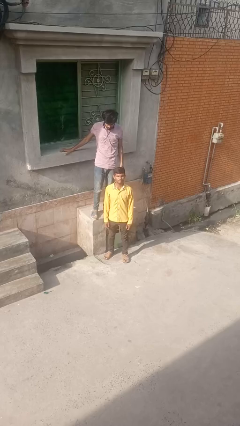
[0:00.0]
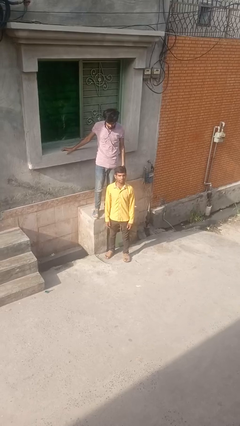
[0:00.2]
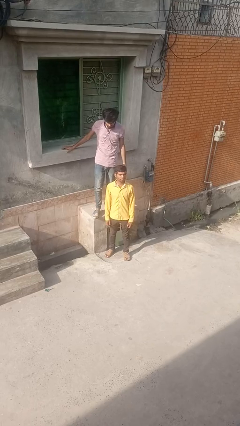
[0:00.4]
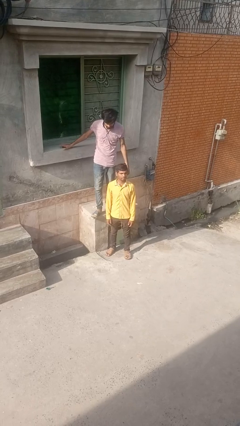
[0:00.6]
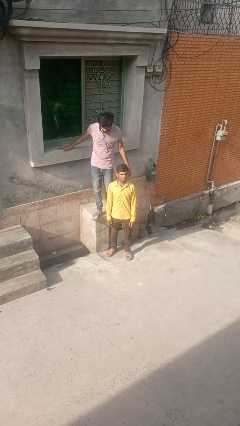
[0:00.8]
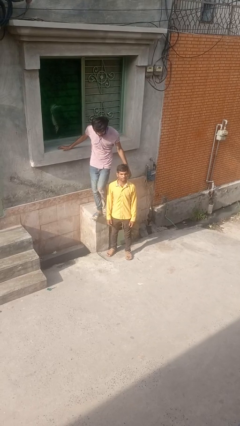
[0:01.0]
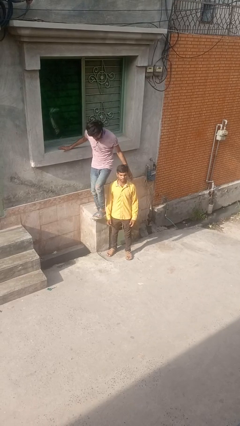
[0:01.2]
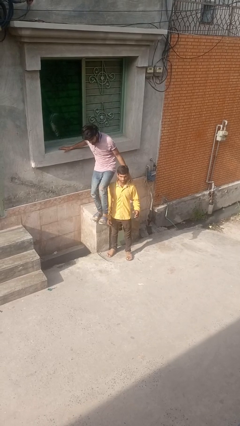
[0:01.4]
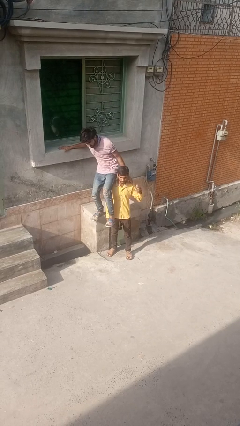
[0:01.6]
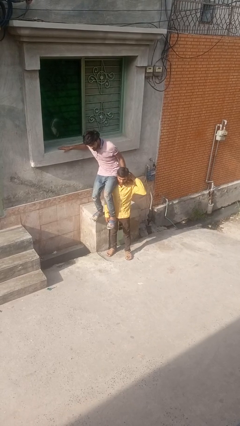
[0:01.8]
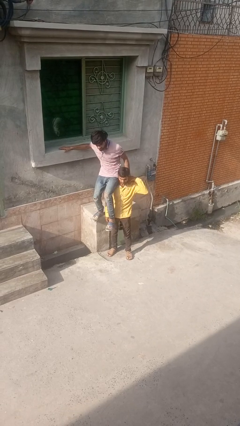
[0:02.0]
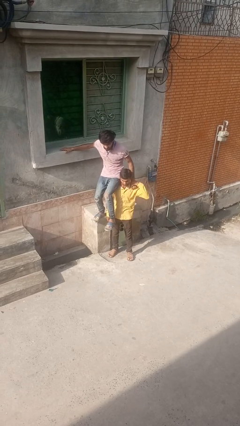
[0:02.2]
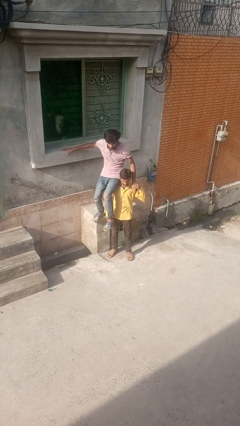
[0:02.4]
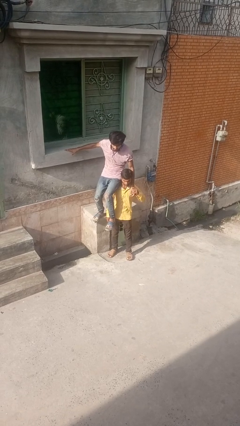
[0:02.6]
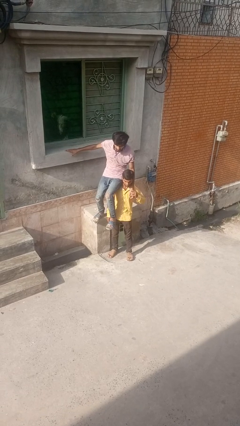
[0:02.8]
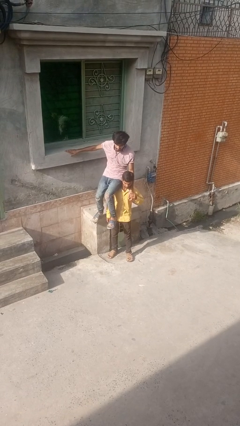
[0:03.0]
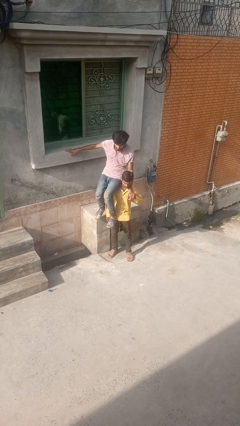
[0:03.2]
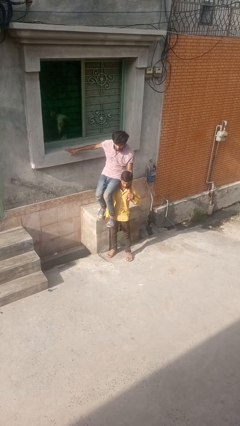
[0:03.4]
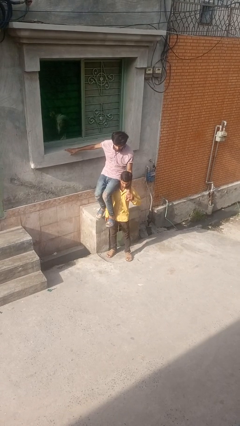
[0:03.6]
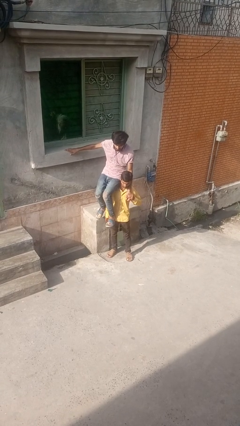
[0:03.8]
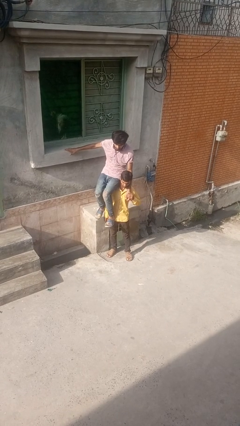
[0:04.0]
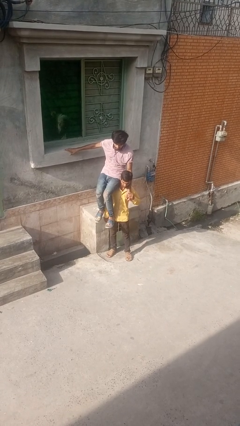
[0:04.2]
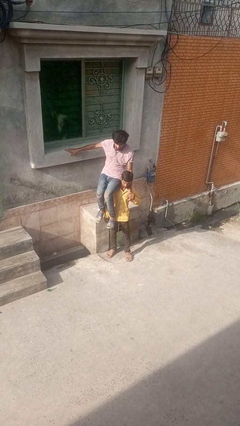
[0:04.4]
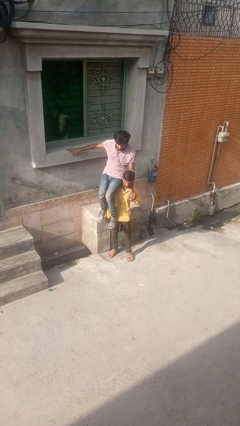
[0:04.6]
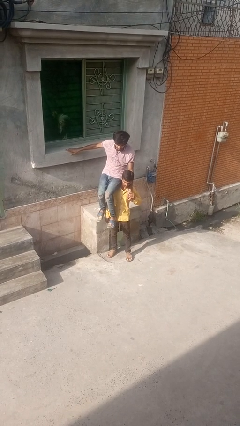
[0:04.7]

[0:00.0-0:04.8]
person carries person over shoulder

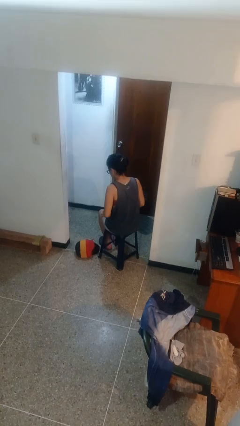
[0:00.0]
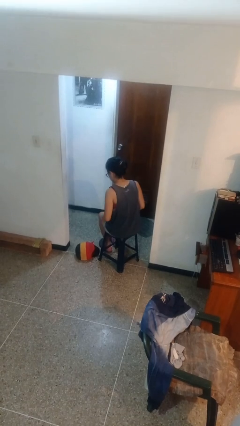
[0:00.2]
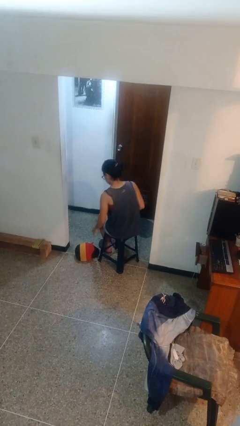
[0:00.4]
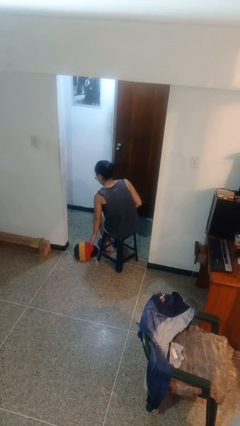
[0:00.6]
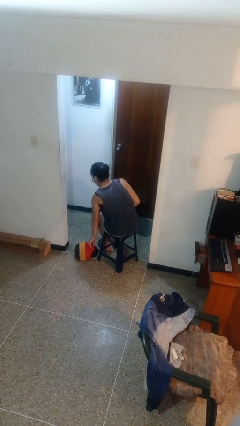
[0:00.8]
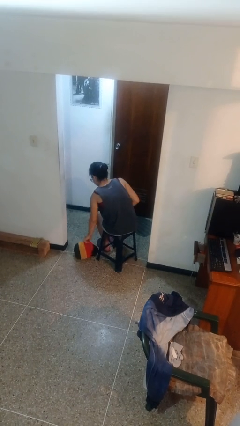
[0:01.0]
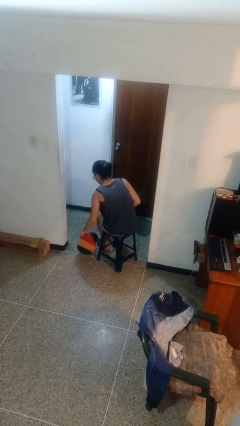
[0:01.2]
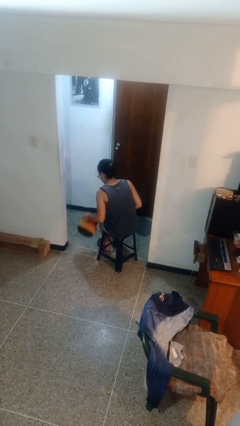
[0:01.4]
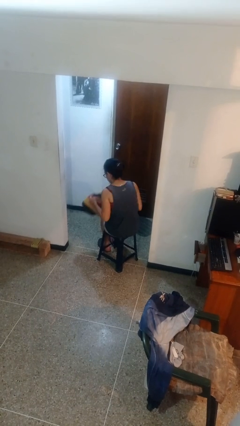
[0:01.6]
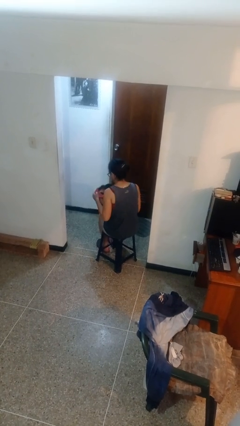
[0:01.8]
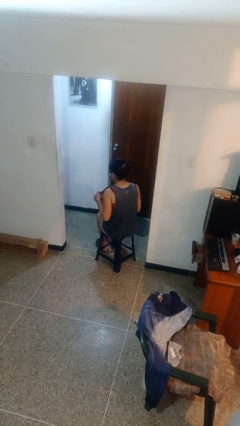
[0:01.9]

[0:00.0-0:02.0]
person picks up object from floor

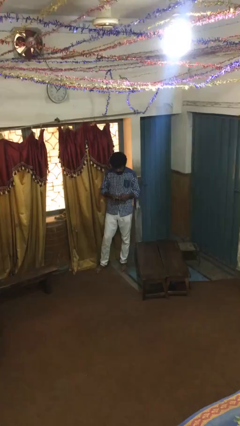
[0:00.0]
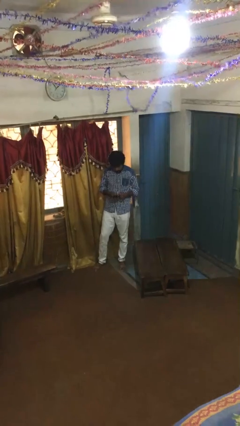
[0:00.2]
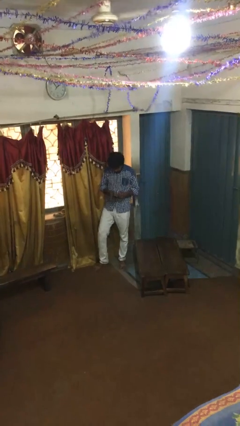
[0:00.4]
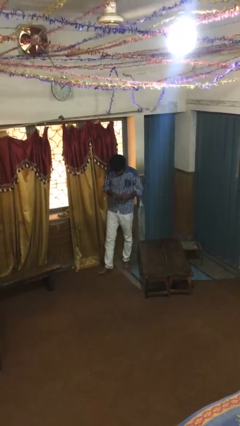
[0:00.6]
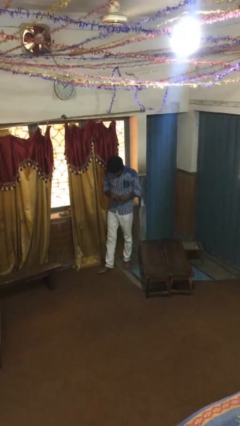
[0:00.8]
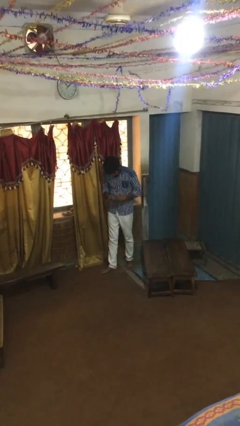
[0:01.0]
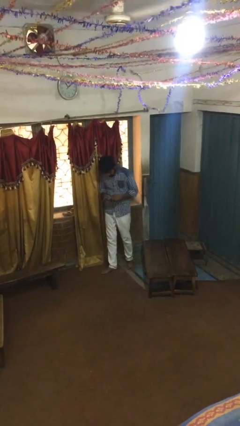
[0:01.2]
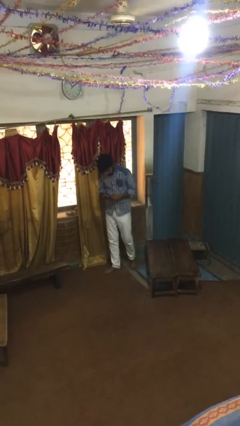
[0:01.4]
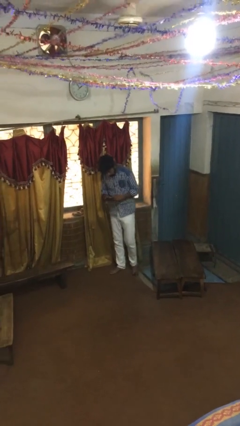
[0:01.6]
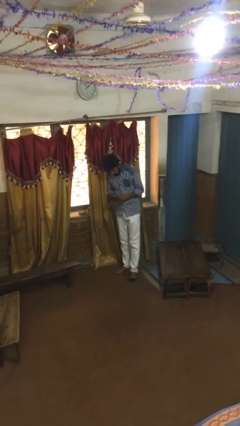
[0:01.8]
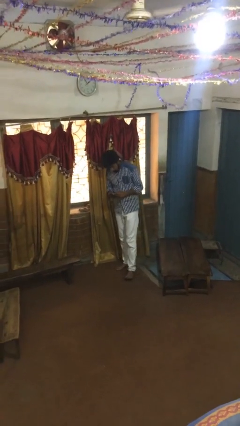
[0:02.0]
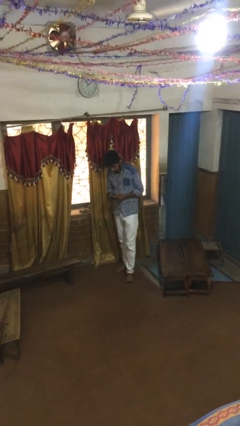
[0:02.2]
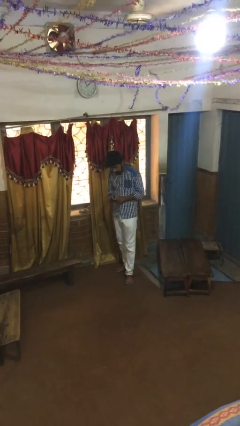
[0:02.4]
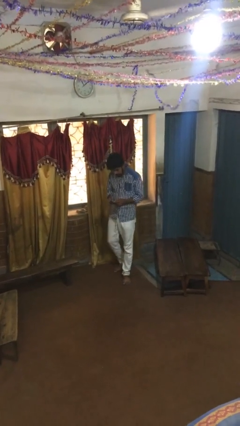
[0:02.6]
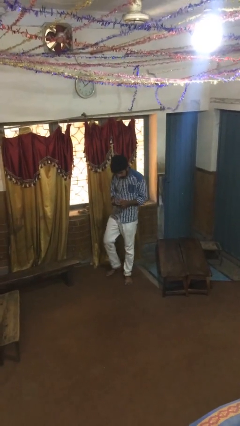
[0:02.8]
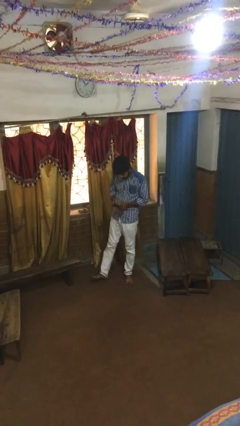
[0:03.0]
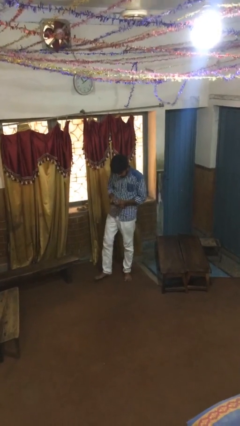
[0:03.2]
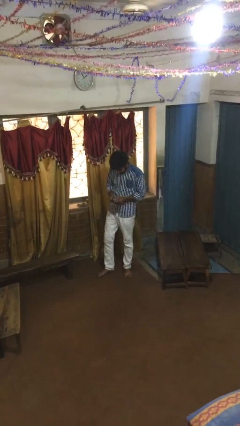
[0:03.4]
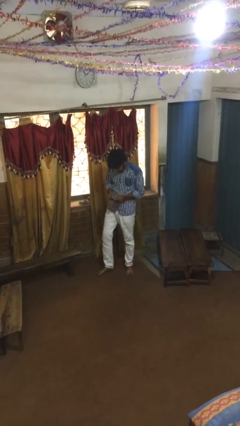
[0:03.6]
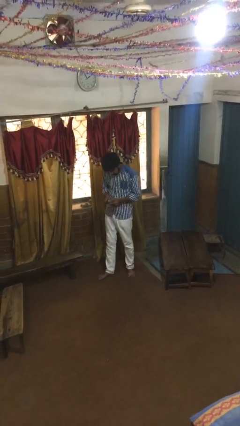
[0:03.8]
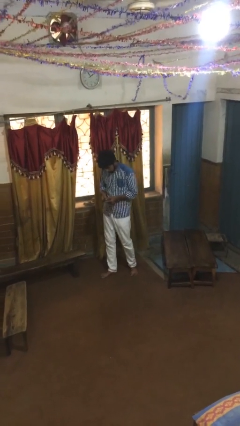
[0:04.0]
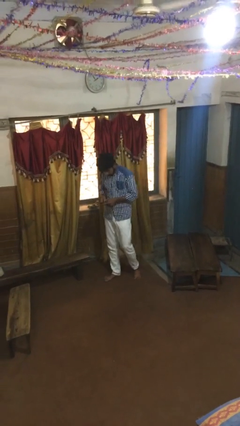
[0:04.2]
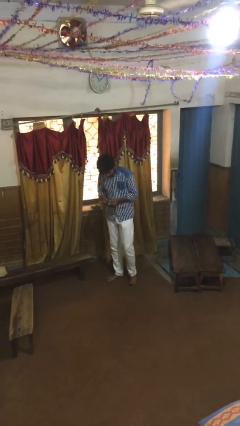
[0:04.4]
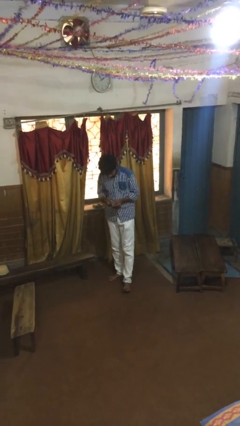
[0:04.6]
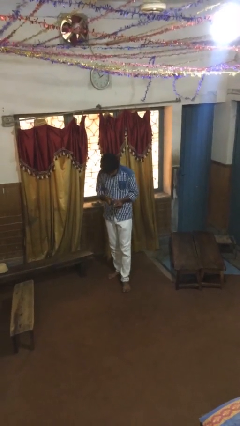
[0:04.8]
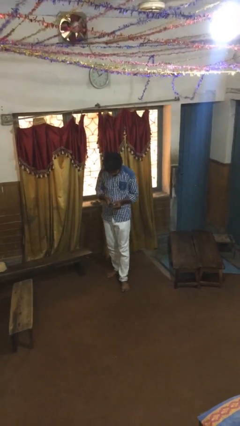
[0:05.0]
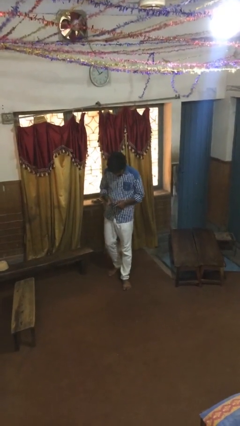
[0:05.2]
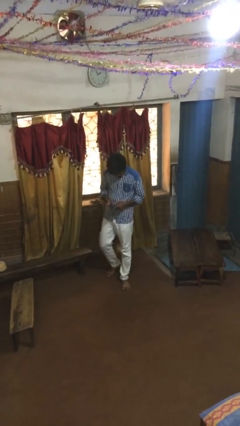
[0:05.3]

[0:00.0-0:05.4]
person texts on phone

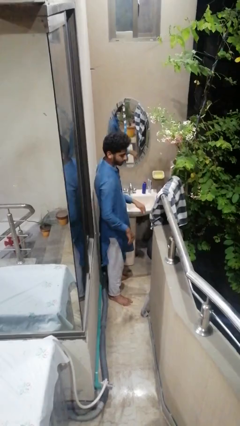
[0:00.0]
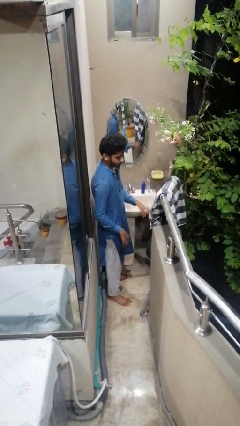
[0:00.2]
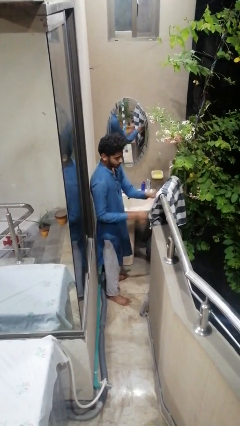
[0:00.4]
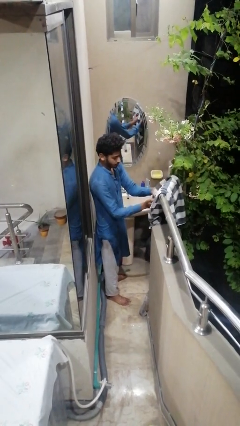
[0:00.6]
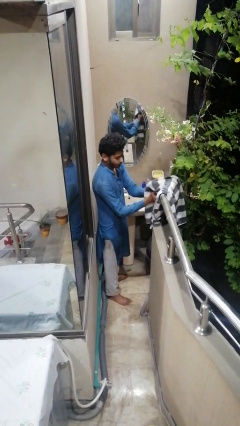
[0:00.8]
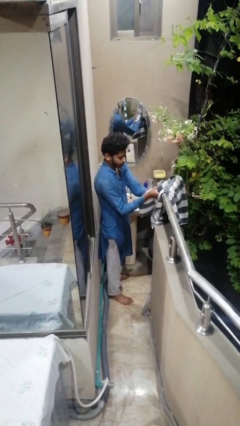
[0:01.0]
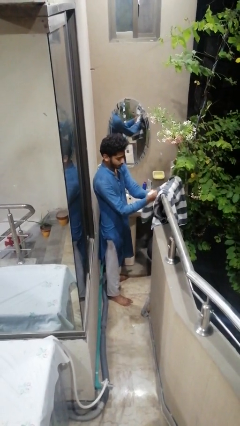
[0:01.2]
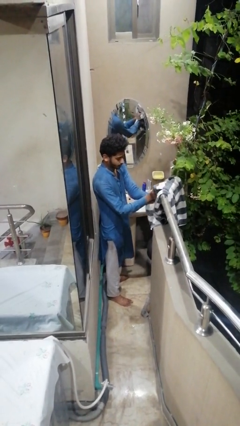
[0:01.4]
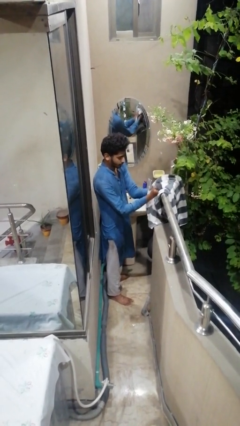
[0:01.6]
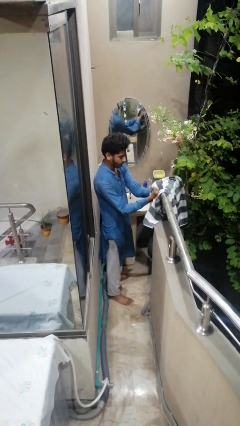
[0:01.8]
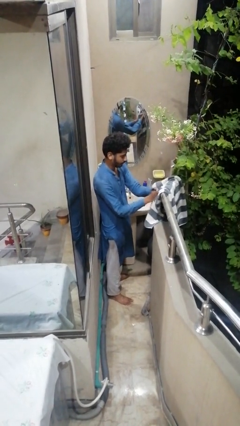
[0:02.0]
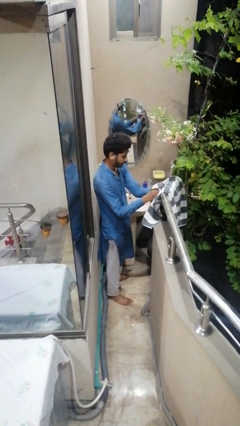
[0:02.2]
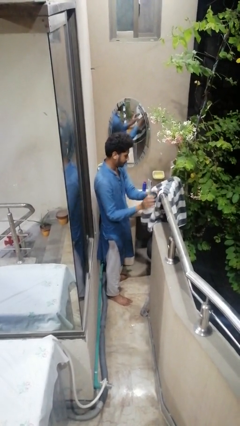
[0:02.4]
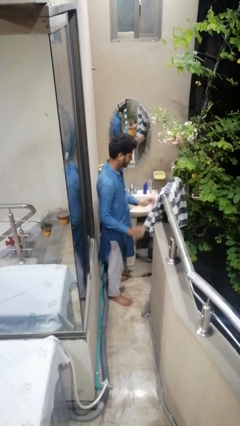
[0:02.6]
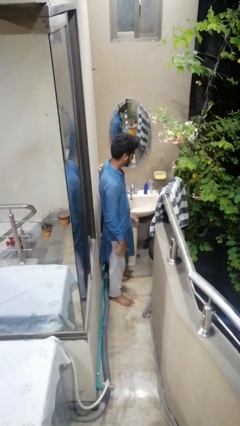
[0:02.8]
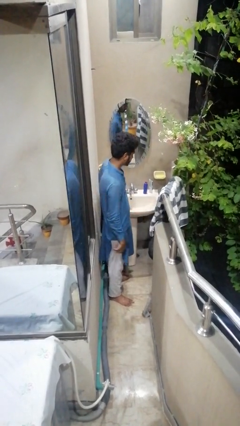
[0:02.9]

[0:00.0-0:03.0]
person dries hands with towel

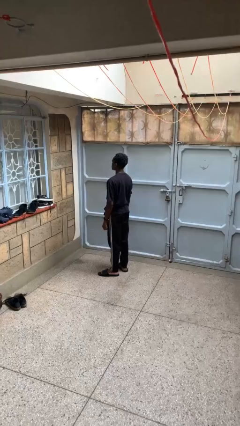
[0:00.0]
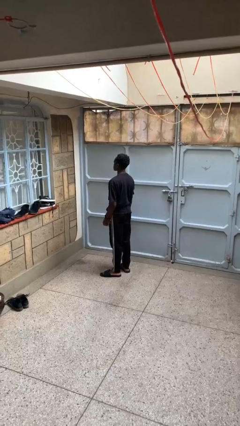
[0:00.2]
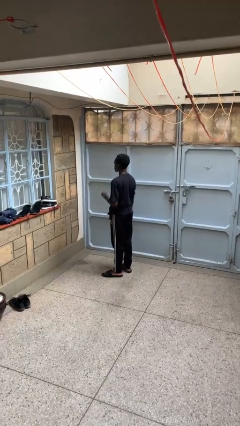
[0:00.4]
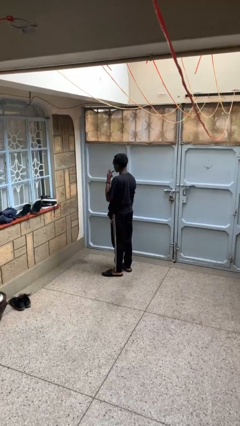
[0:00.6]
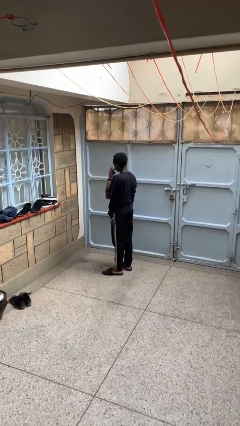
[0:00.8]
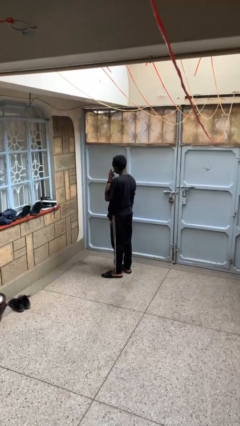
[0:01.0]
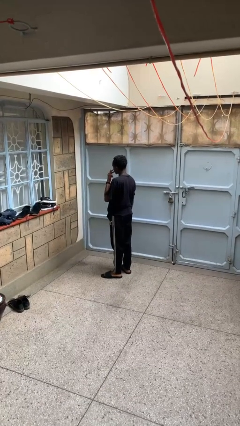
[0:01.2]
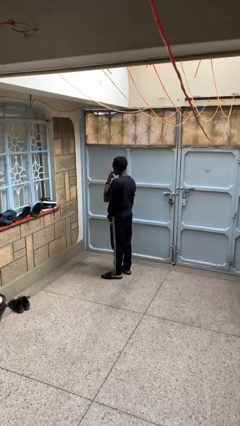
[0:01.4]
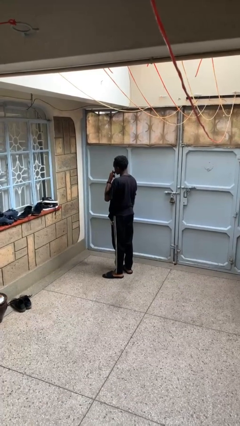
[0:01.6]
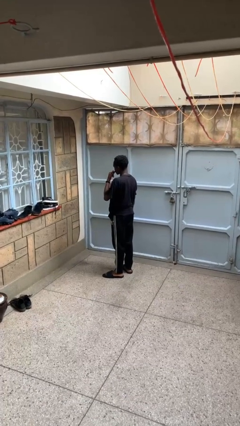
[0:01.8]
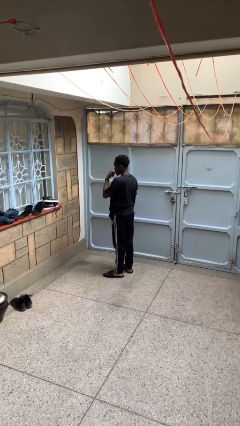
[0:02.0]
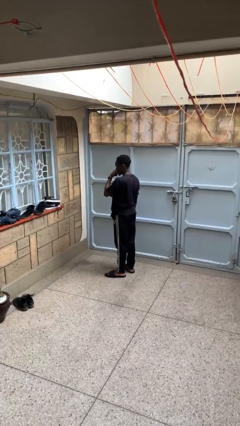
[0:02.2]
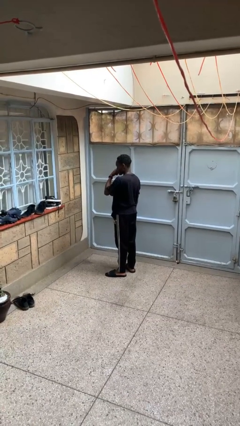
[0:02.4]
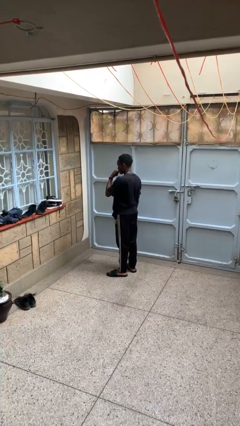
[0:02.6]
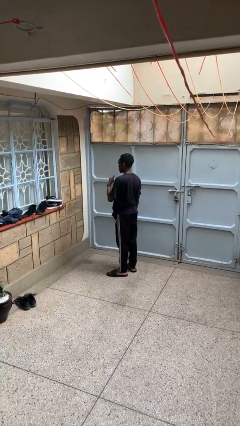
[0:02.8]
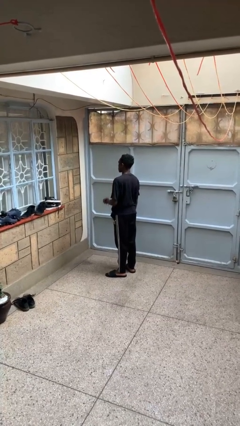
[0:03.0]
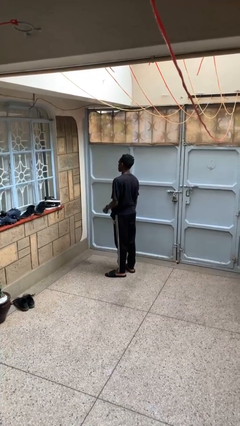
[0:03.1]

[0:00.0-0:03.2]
person licks fingers
